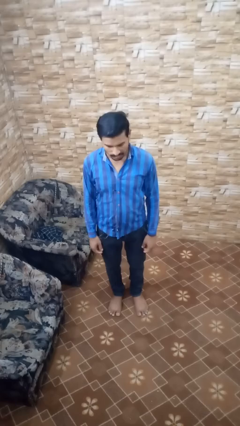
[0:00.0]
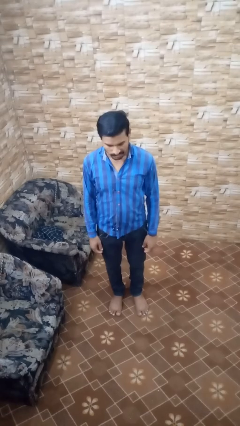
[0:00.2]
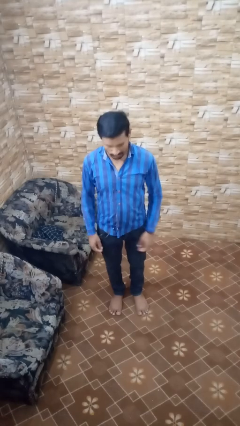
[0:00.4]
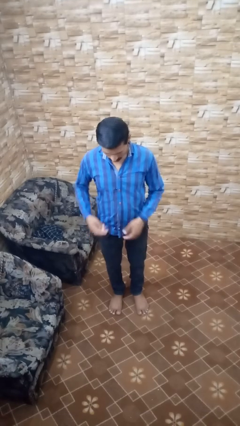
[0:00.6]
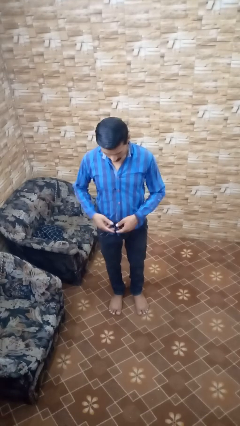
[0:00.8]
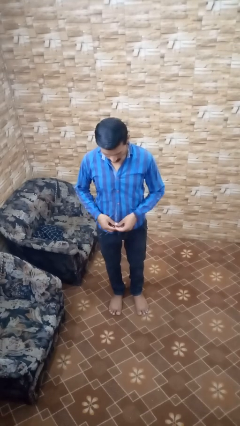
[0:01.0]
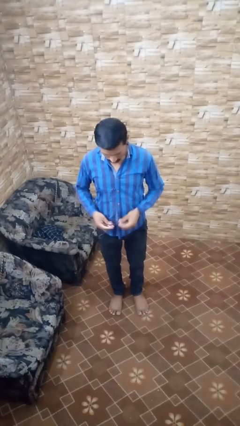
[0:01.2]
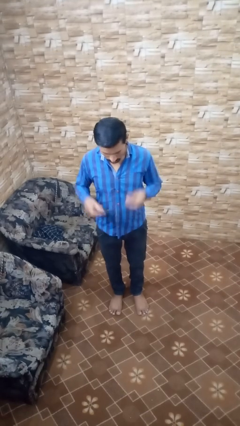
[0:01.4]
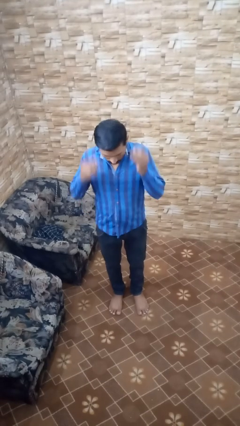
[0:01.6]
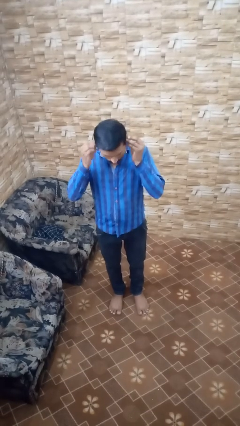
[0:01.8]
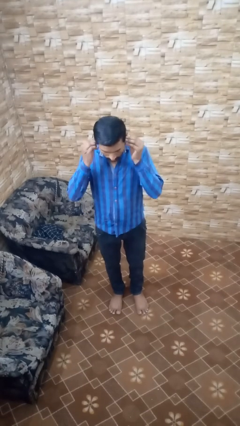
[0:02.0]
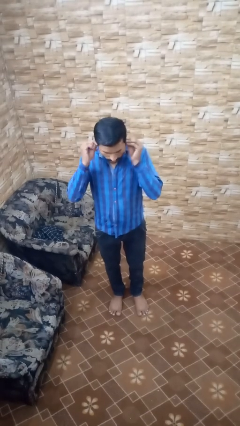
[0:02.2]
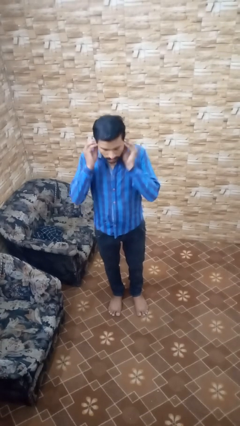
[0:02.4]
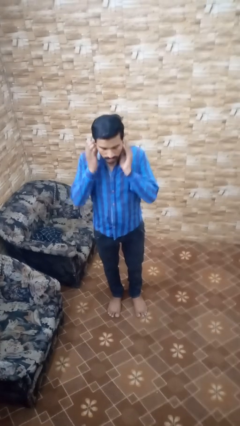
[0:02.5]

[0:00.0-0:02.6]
person puts on headphones

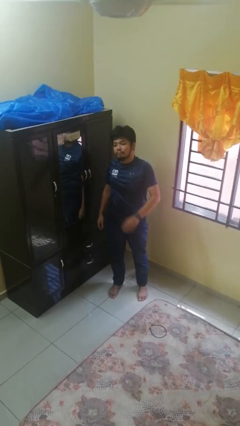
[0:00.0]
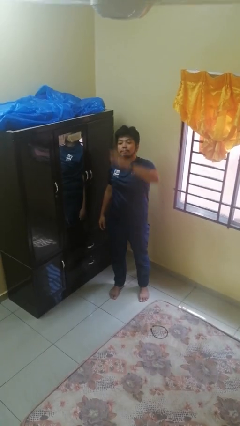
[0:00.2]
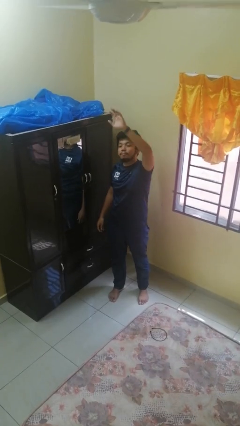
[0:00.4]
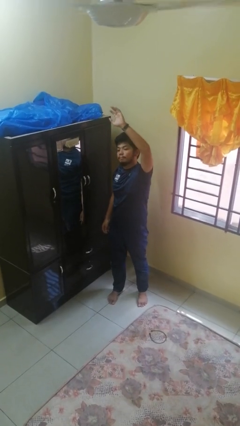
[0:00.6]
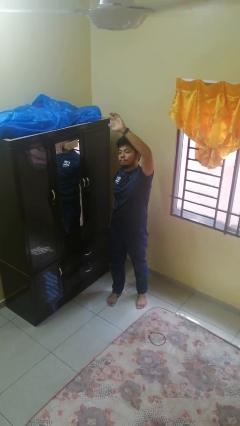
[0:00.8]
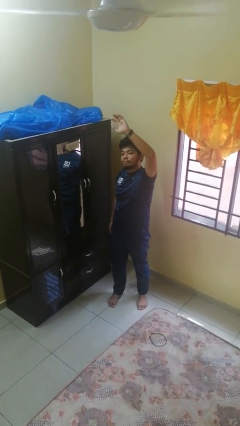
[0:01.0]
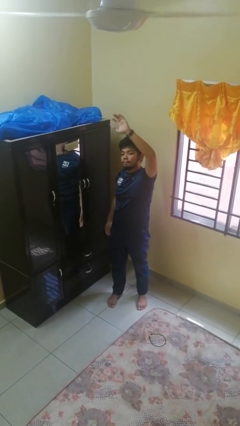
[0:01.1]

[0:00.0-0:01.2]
person gestures raise hand

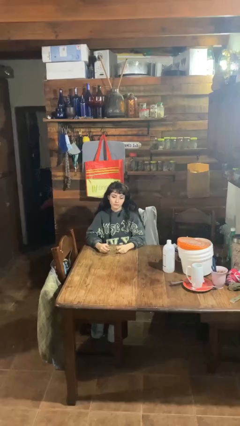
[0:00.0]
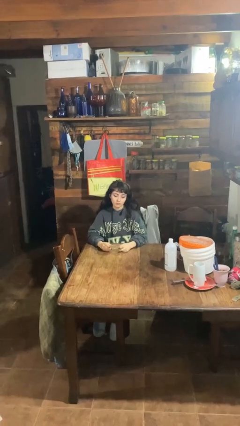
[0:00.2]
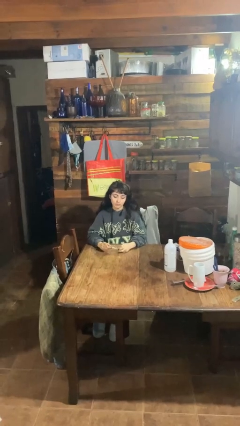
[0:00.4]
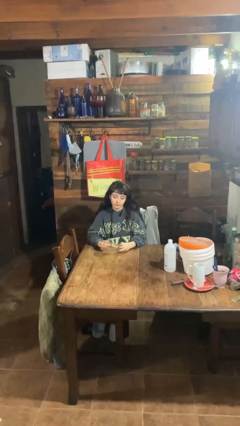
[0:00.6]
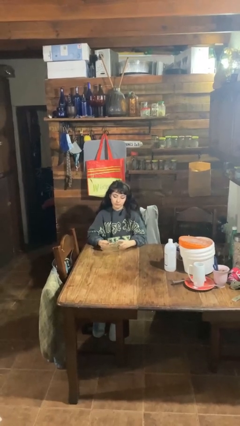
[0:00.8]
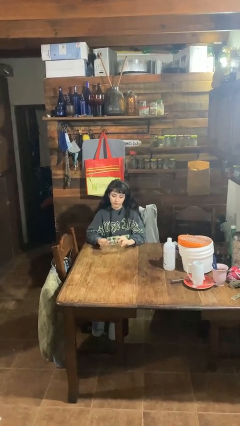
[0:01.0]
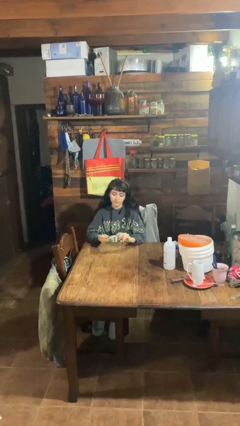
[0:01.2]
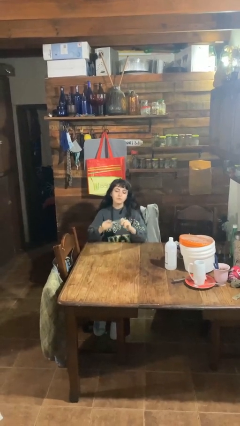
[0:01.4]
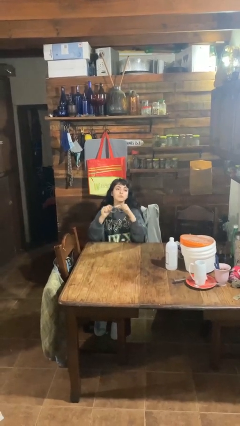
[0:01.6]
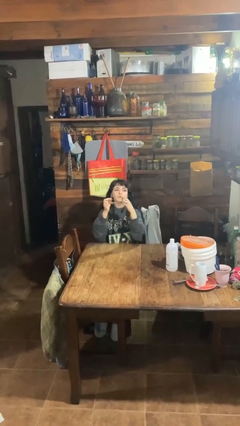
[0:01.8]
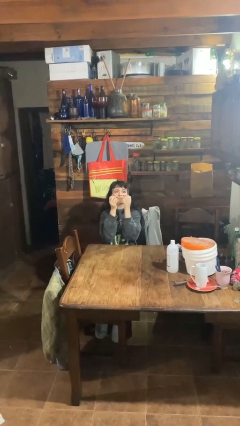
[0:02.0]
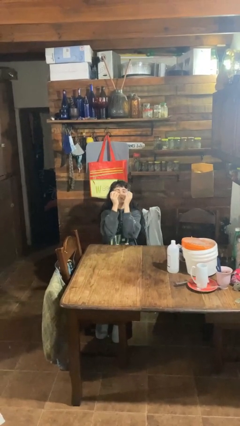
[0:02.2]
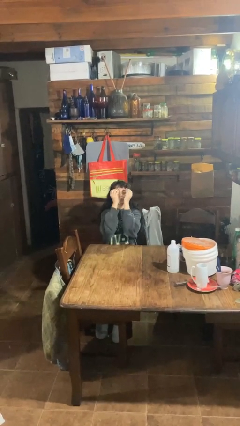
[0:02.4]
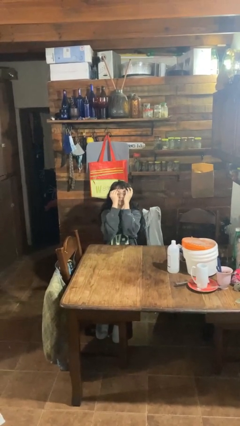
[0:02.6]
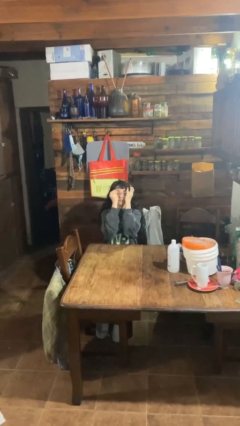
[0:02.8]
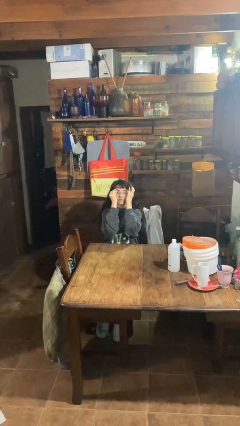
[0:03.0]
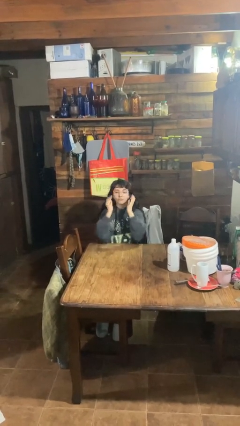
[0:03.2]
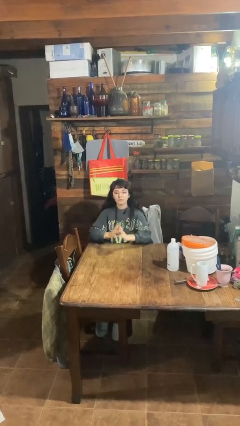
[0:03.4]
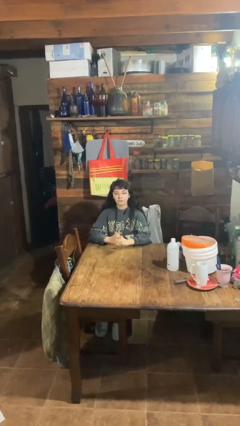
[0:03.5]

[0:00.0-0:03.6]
person puts on glasses

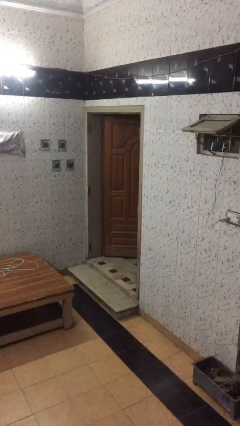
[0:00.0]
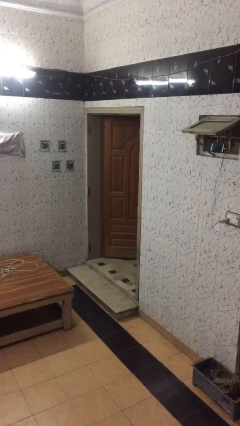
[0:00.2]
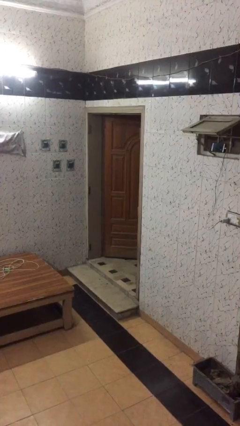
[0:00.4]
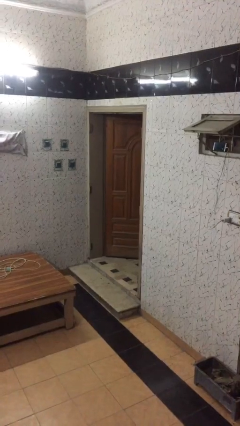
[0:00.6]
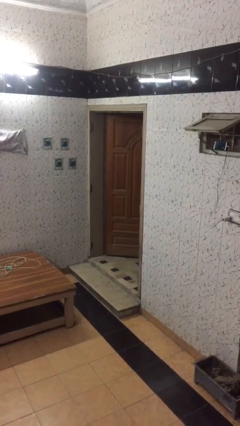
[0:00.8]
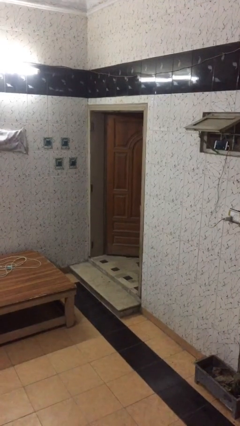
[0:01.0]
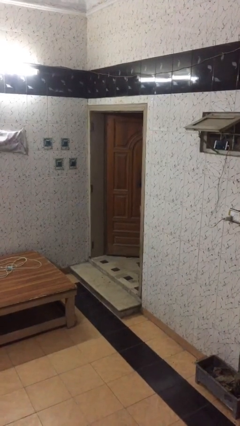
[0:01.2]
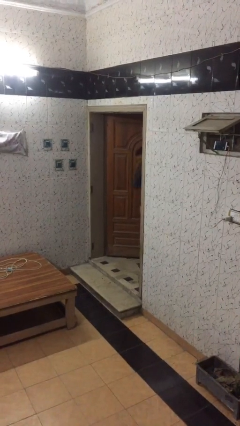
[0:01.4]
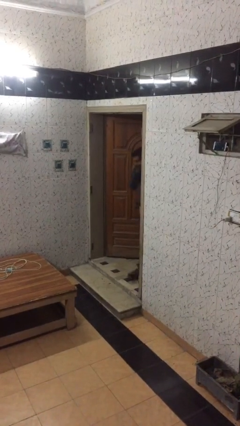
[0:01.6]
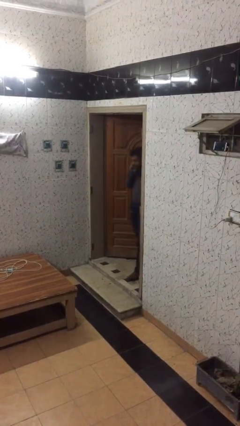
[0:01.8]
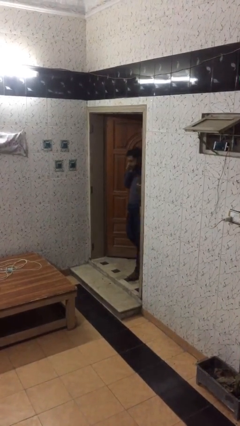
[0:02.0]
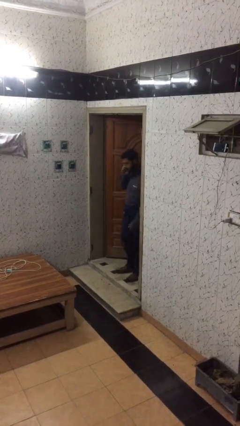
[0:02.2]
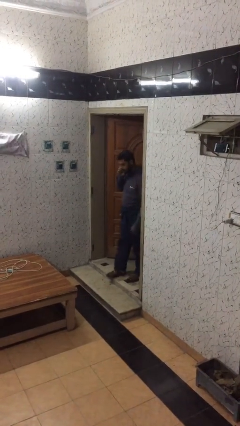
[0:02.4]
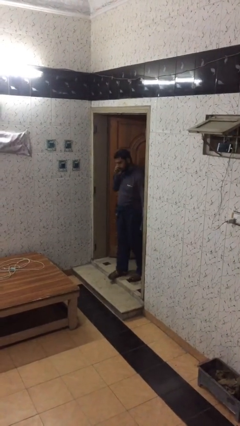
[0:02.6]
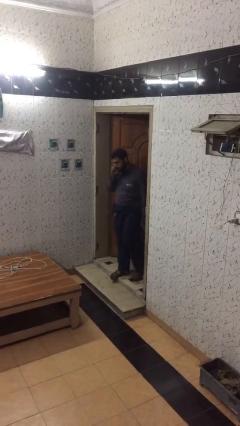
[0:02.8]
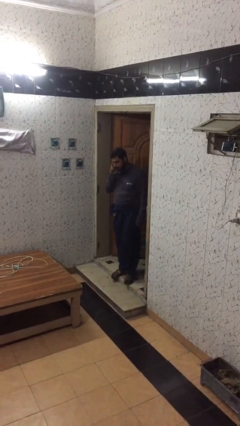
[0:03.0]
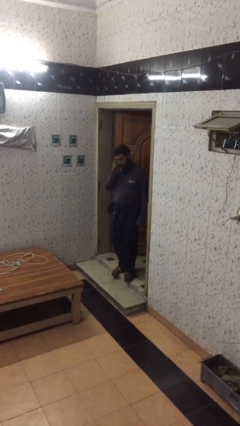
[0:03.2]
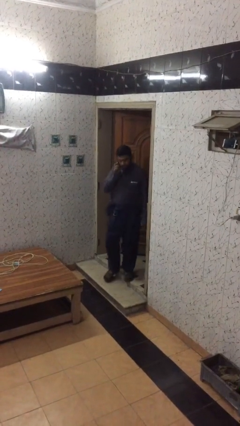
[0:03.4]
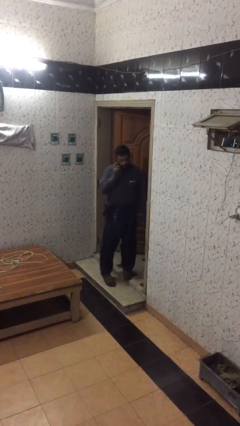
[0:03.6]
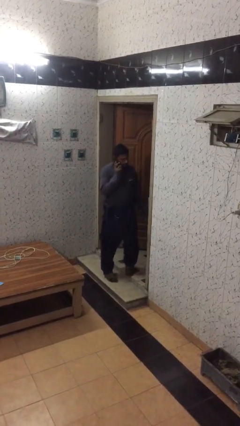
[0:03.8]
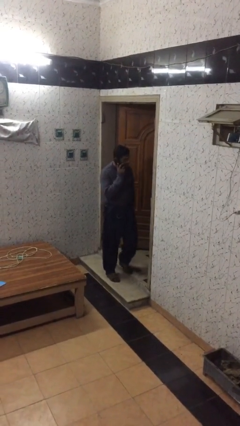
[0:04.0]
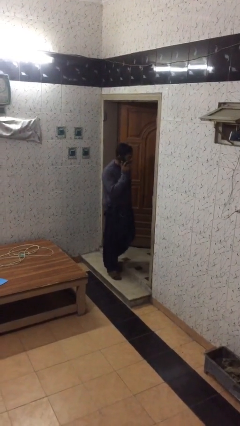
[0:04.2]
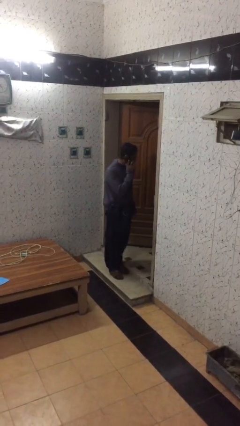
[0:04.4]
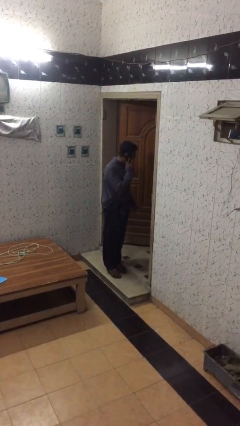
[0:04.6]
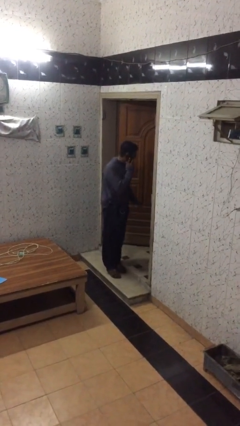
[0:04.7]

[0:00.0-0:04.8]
person enters scene through structure

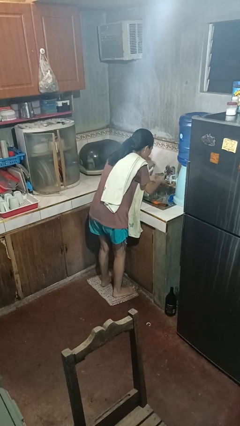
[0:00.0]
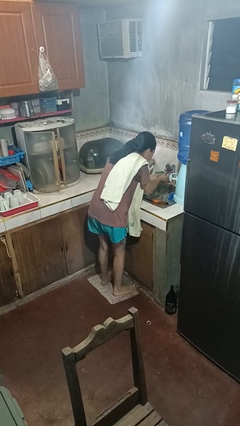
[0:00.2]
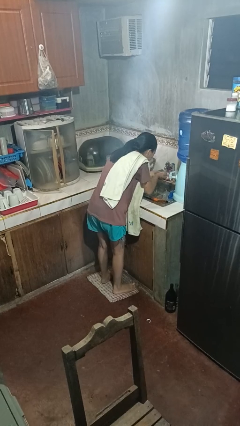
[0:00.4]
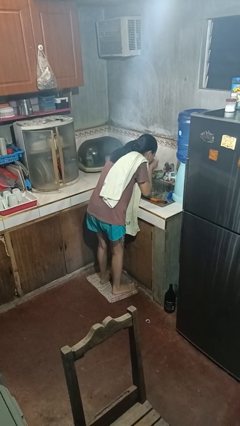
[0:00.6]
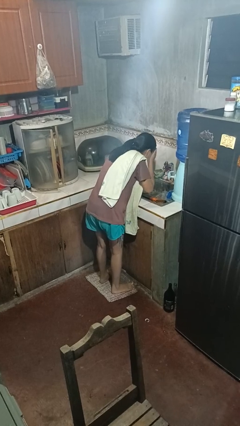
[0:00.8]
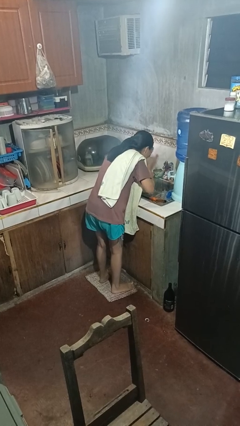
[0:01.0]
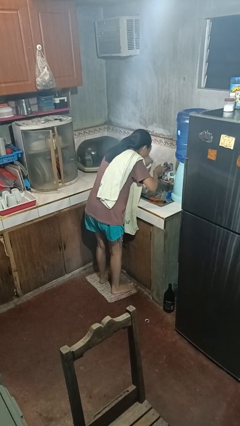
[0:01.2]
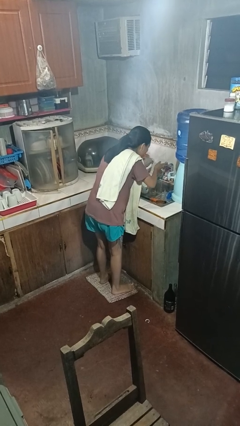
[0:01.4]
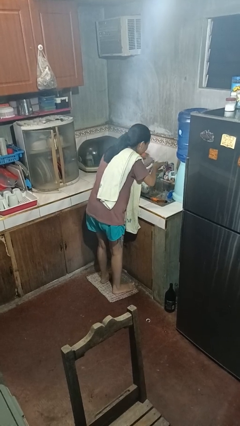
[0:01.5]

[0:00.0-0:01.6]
person washes face

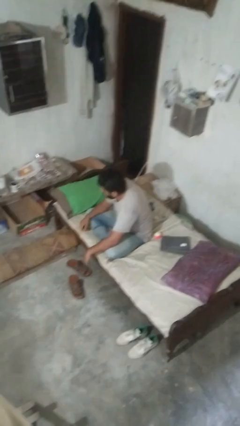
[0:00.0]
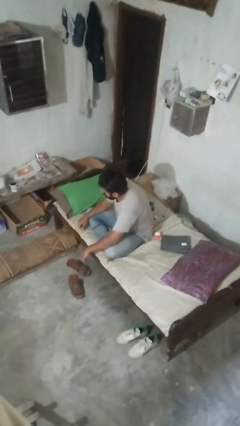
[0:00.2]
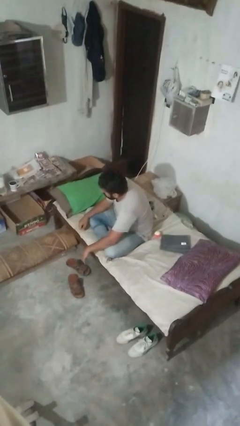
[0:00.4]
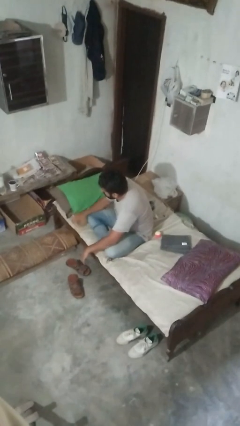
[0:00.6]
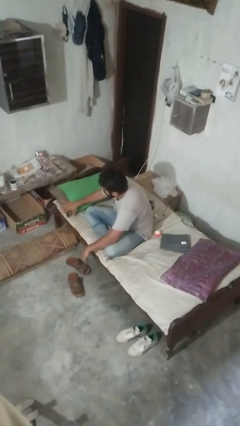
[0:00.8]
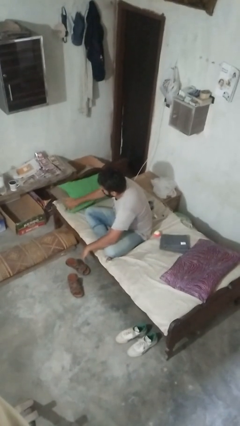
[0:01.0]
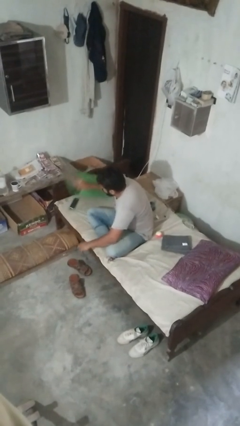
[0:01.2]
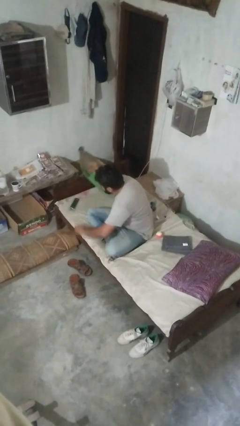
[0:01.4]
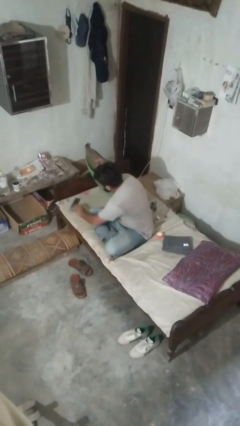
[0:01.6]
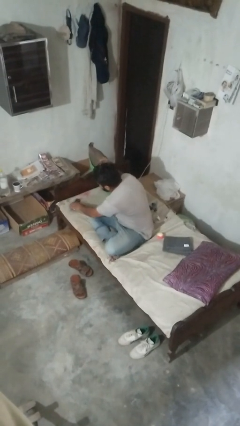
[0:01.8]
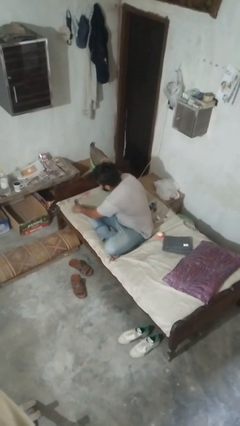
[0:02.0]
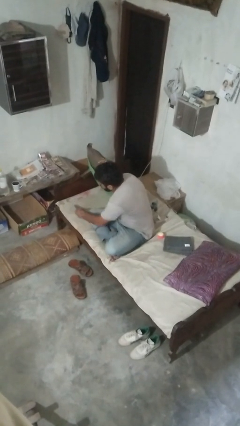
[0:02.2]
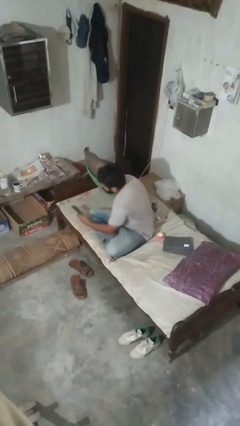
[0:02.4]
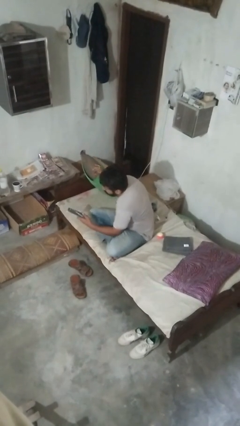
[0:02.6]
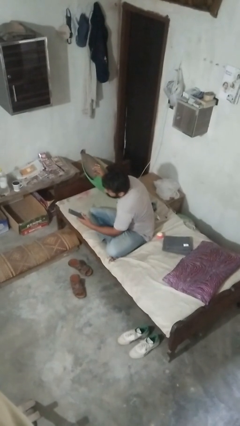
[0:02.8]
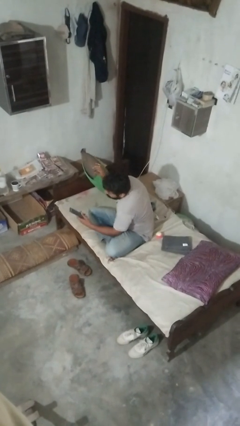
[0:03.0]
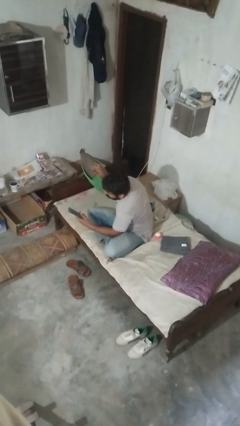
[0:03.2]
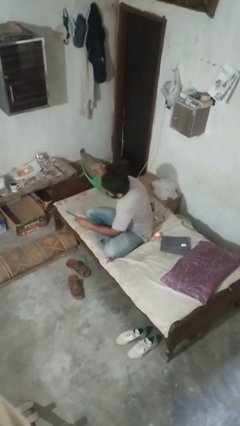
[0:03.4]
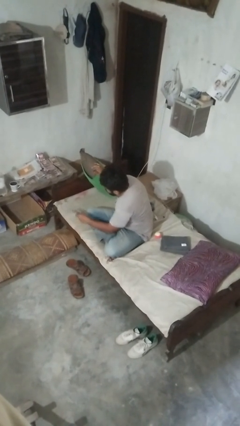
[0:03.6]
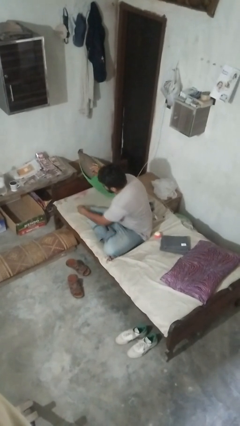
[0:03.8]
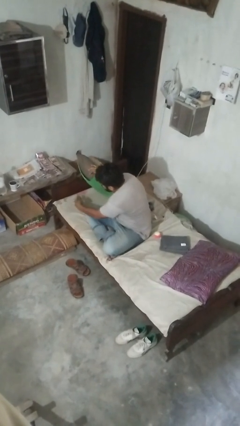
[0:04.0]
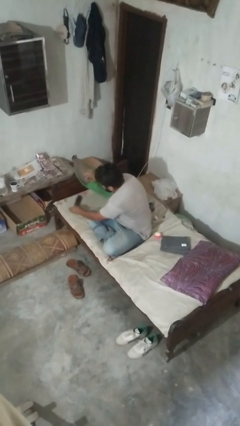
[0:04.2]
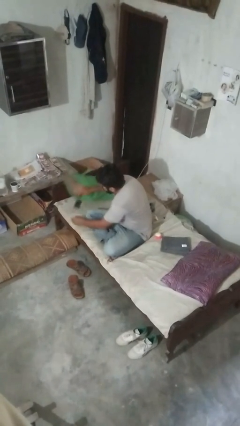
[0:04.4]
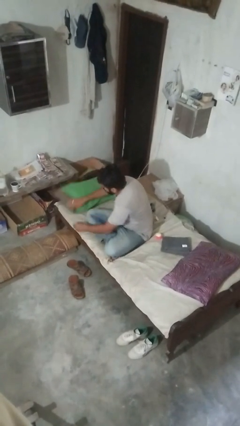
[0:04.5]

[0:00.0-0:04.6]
person searches in couch
